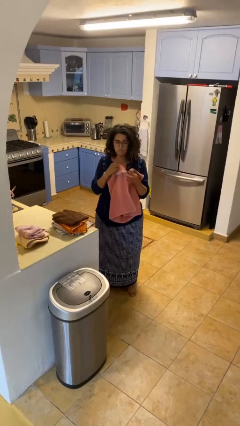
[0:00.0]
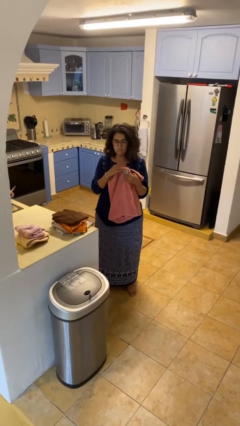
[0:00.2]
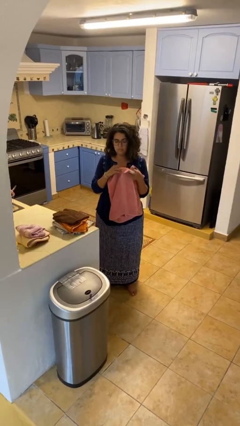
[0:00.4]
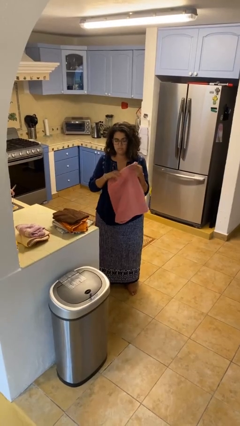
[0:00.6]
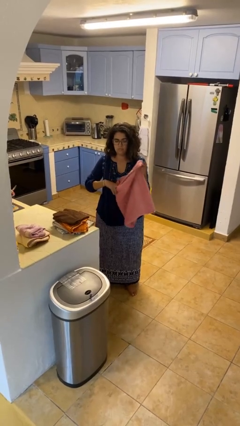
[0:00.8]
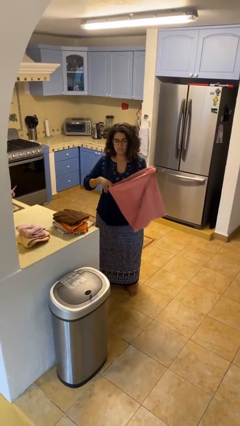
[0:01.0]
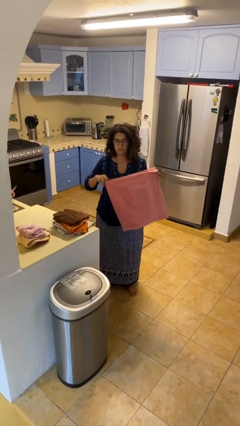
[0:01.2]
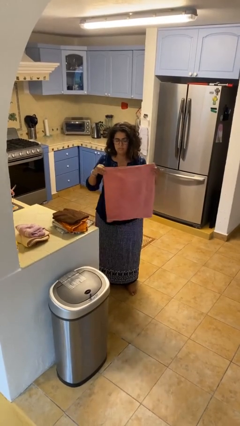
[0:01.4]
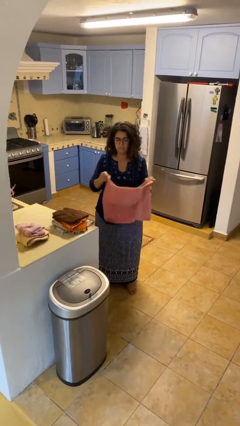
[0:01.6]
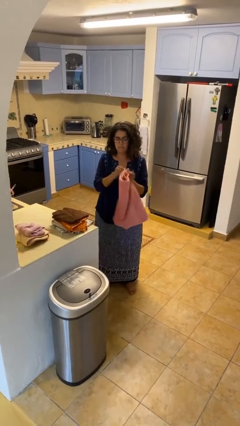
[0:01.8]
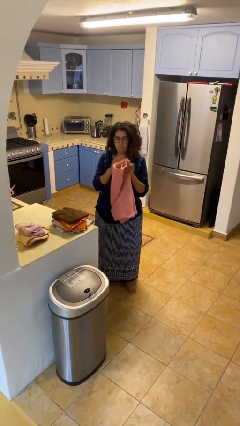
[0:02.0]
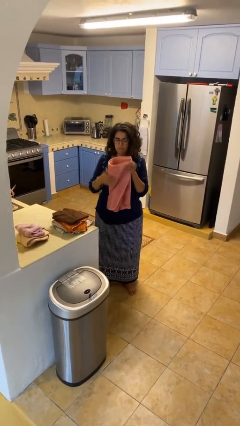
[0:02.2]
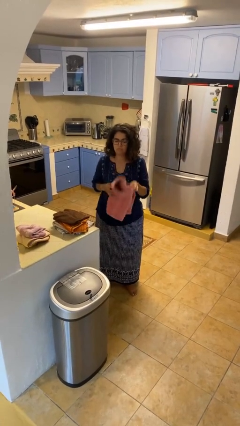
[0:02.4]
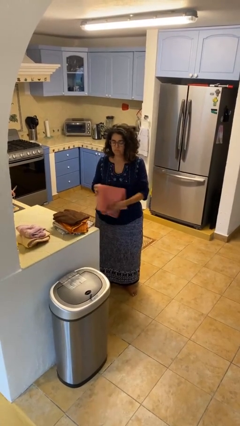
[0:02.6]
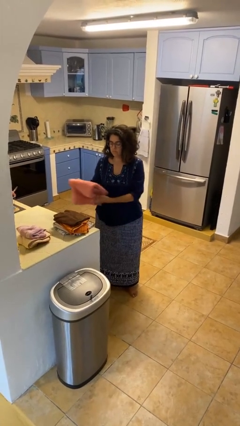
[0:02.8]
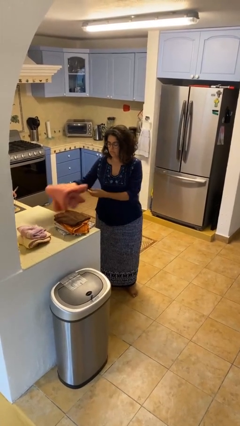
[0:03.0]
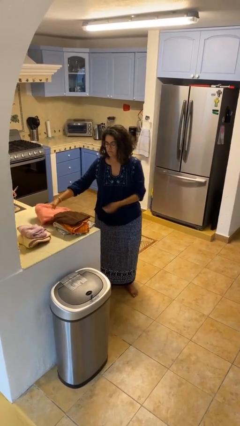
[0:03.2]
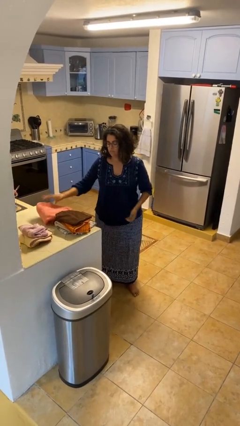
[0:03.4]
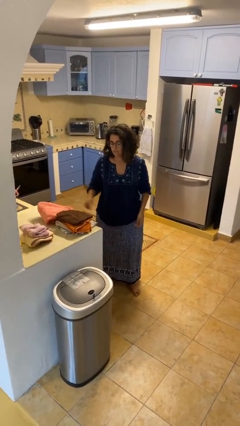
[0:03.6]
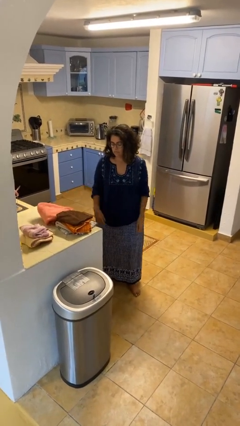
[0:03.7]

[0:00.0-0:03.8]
person folds towel

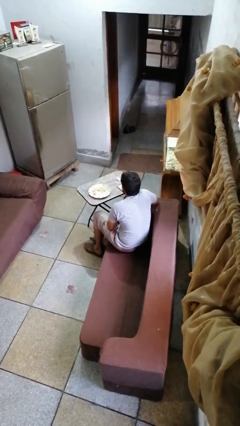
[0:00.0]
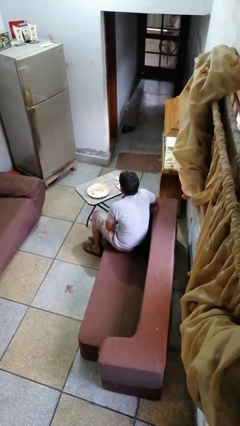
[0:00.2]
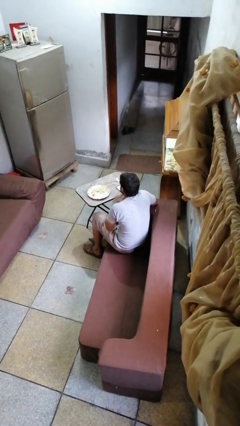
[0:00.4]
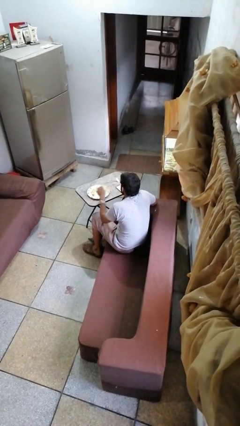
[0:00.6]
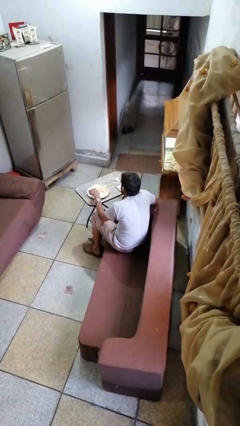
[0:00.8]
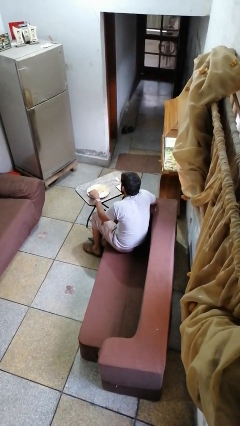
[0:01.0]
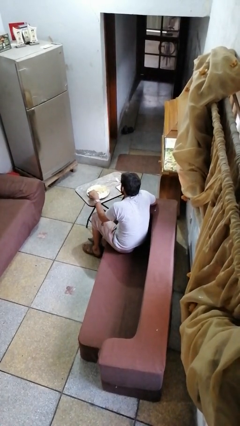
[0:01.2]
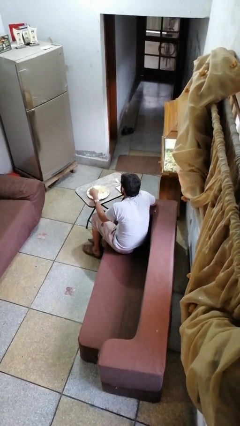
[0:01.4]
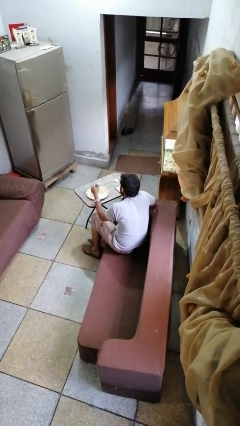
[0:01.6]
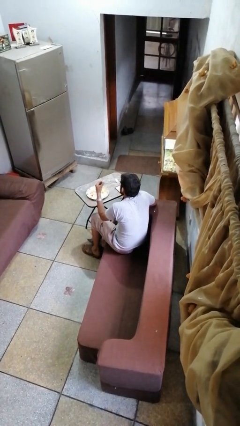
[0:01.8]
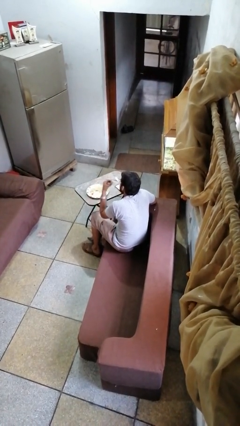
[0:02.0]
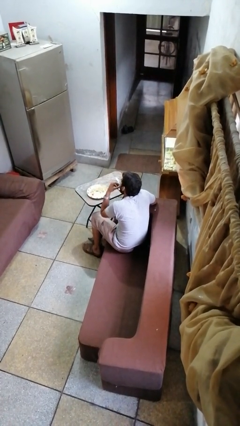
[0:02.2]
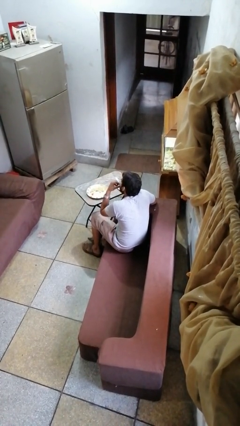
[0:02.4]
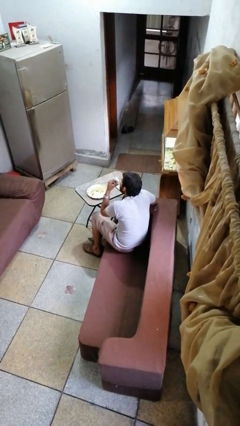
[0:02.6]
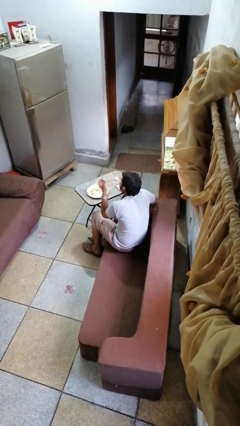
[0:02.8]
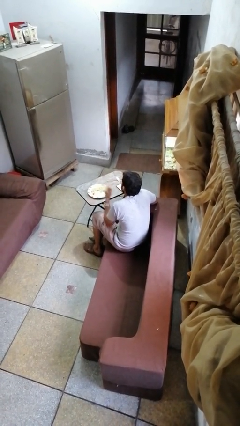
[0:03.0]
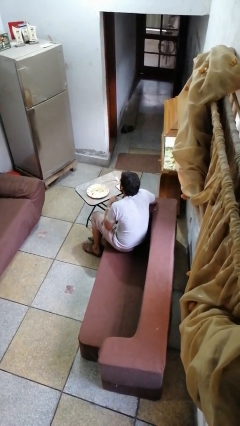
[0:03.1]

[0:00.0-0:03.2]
person eats with hands

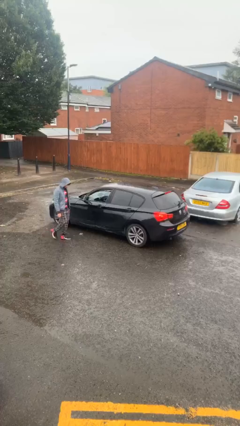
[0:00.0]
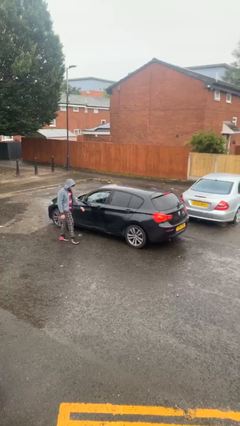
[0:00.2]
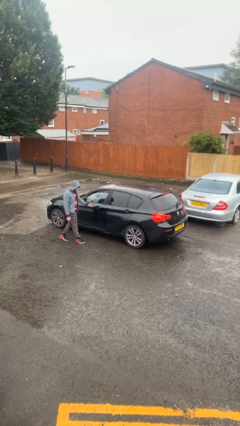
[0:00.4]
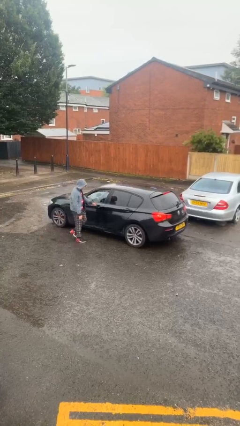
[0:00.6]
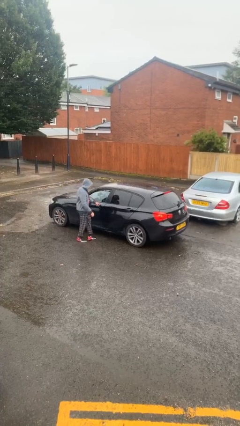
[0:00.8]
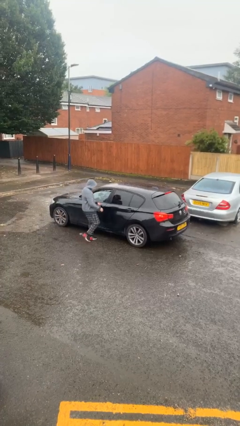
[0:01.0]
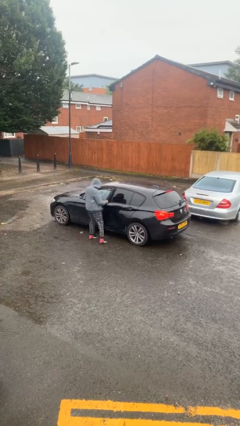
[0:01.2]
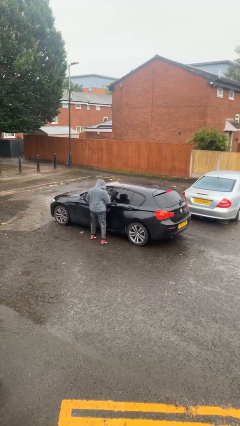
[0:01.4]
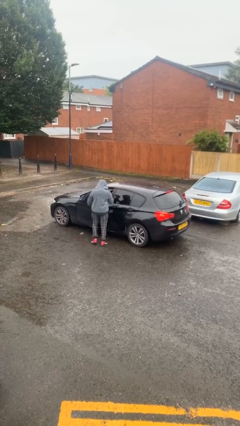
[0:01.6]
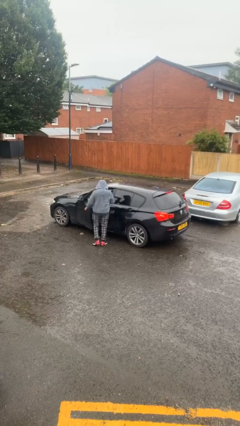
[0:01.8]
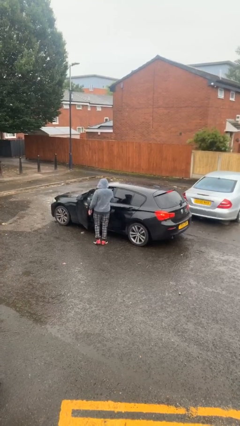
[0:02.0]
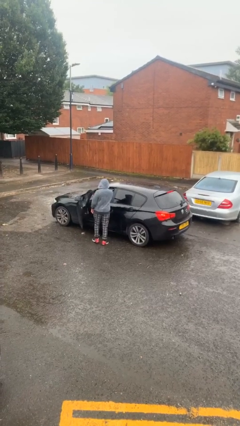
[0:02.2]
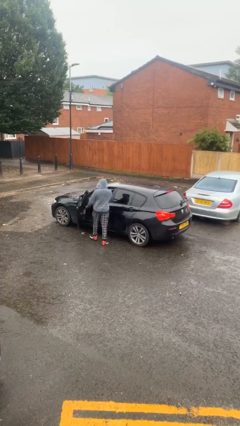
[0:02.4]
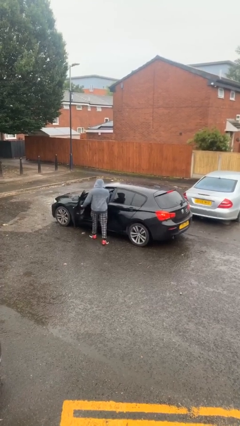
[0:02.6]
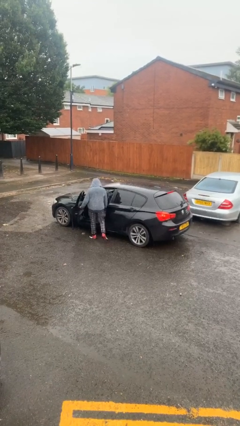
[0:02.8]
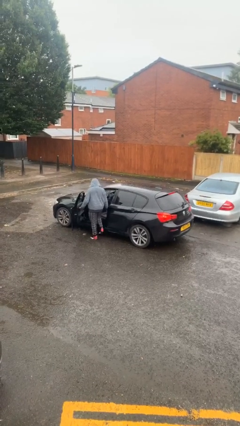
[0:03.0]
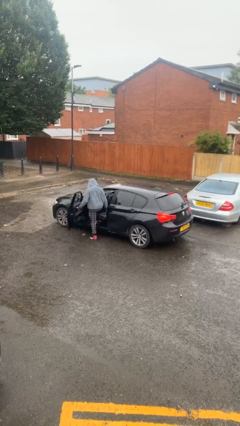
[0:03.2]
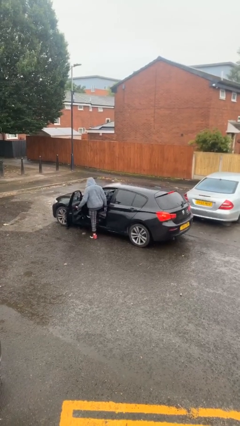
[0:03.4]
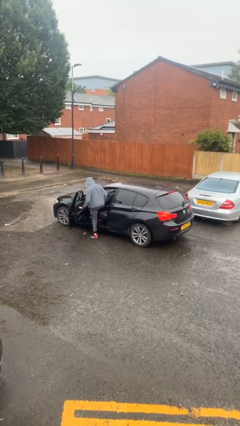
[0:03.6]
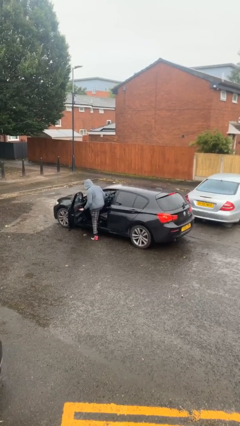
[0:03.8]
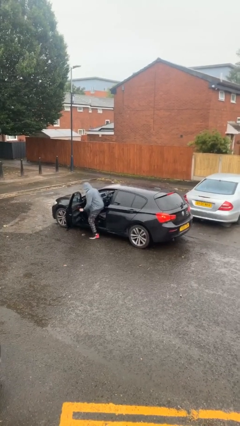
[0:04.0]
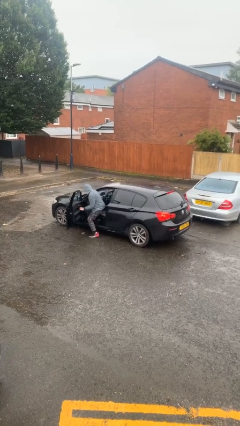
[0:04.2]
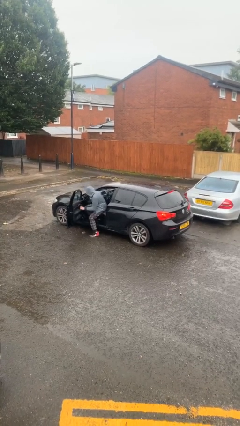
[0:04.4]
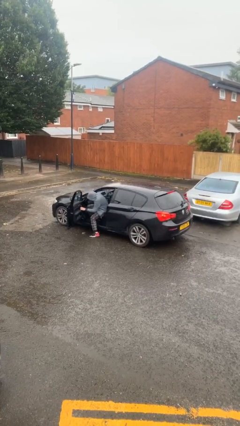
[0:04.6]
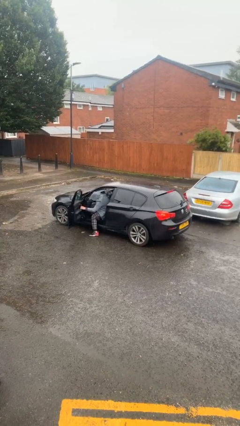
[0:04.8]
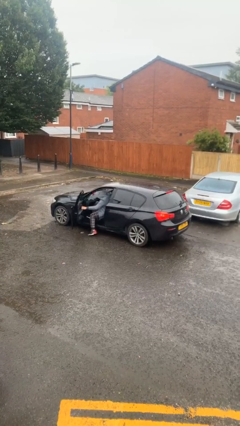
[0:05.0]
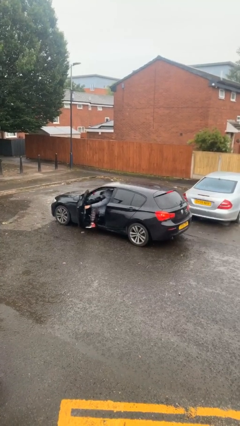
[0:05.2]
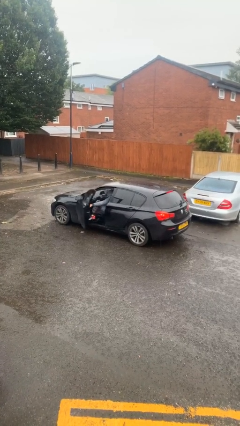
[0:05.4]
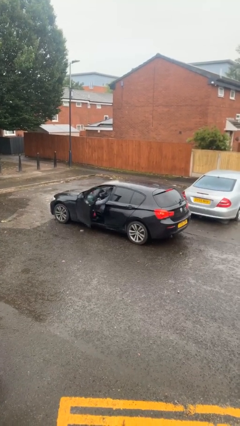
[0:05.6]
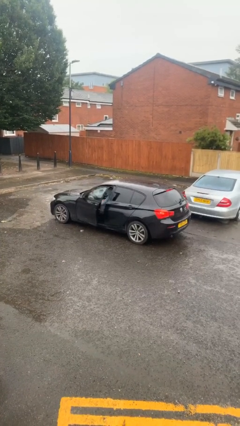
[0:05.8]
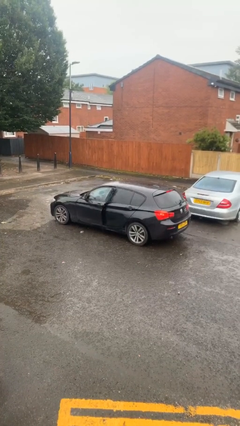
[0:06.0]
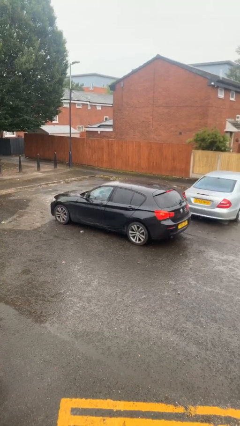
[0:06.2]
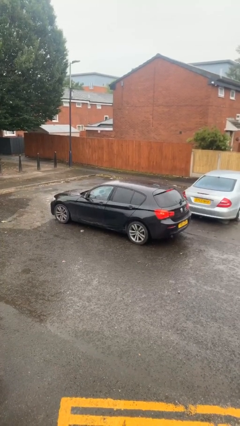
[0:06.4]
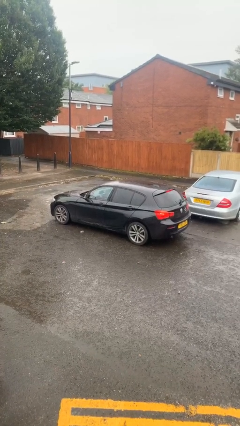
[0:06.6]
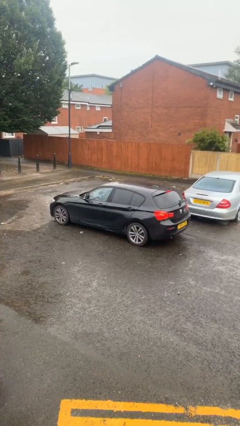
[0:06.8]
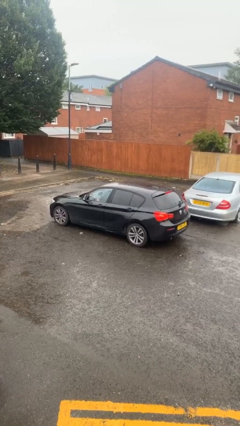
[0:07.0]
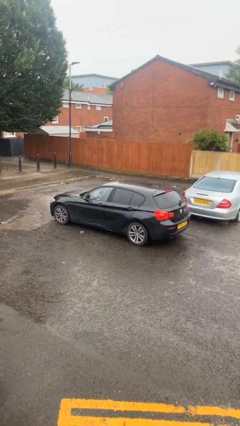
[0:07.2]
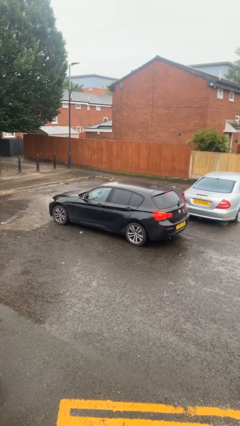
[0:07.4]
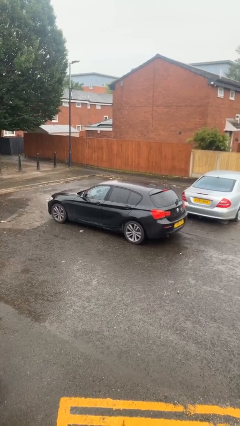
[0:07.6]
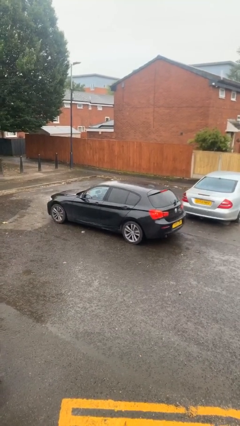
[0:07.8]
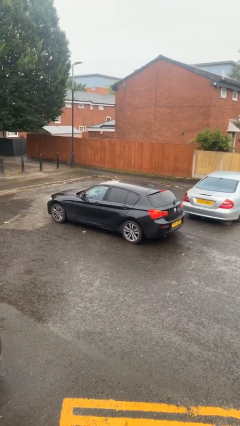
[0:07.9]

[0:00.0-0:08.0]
car picks up person

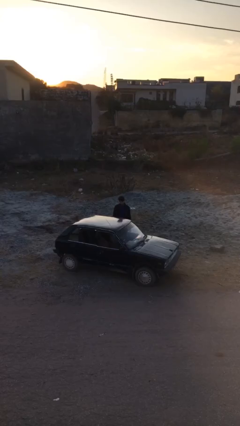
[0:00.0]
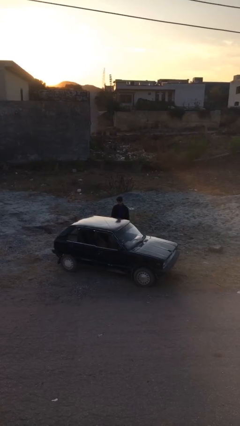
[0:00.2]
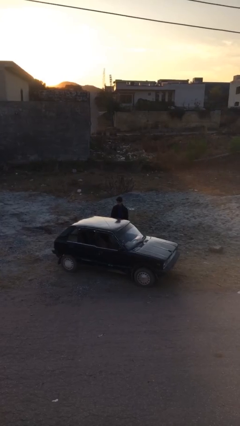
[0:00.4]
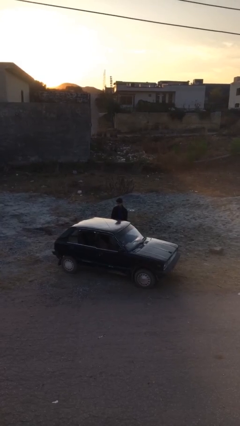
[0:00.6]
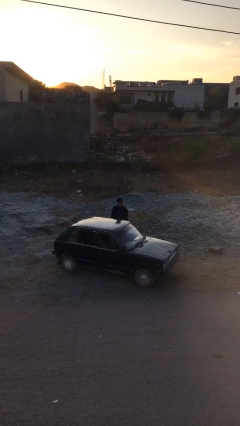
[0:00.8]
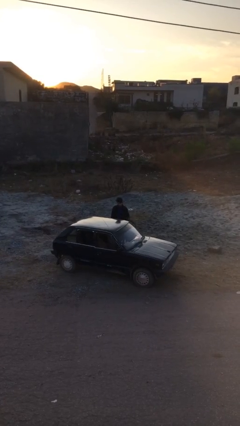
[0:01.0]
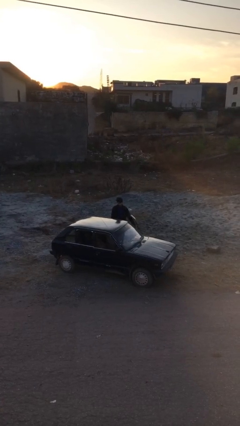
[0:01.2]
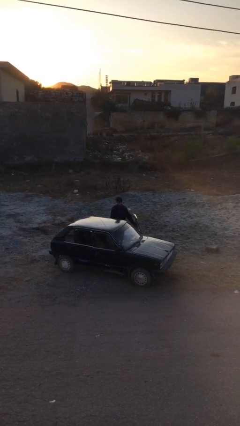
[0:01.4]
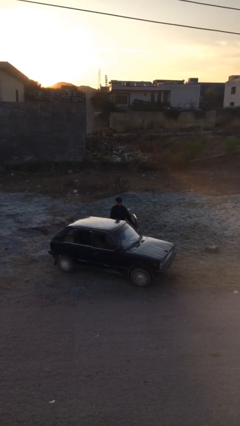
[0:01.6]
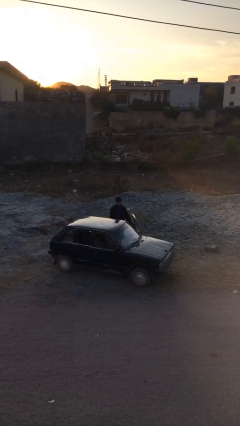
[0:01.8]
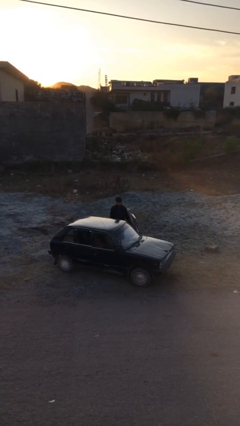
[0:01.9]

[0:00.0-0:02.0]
person opens car door

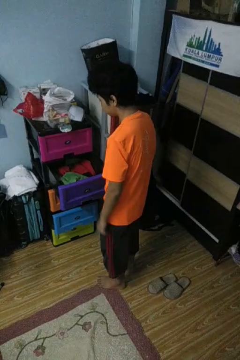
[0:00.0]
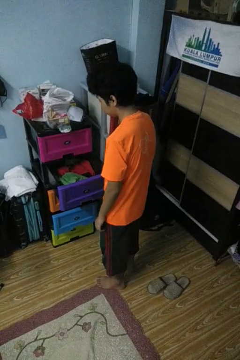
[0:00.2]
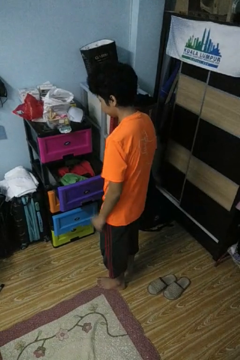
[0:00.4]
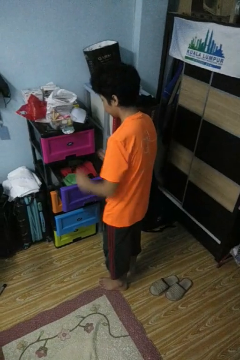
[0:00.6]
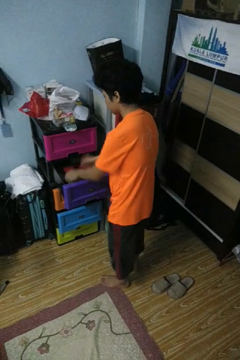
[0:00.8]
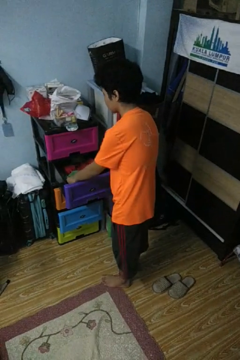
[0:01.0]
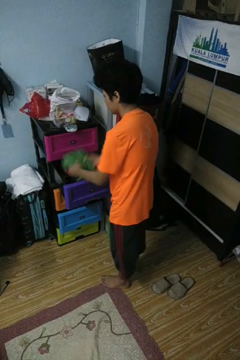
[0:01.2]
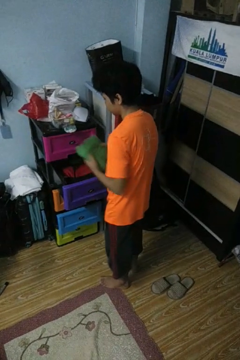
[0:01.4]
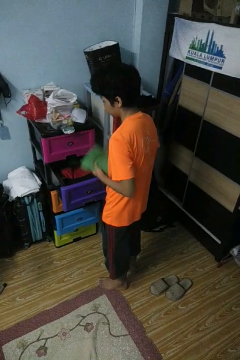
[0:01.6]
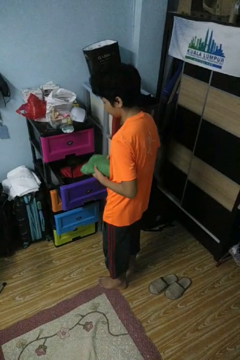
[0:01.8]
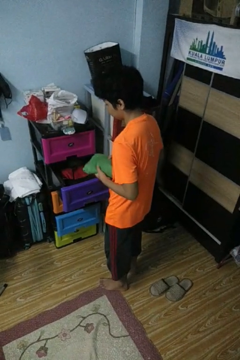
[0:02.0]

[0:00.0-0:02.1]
person takes clothes from dresser
